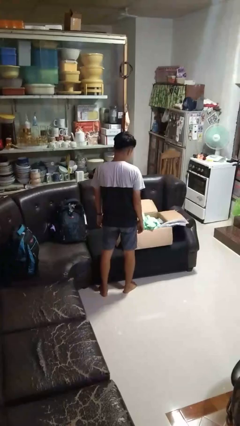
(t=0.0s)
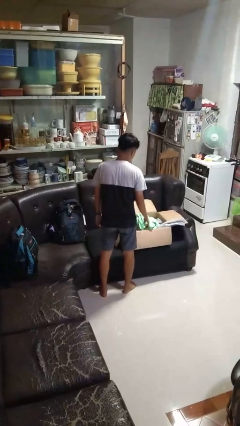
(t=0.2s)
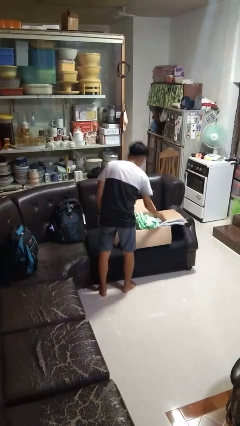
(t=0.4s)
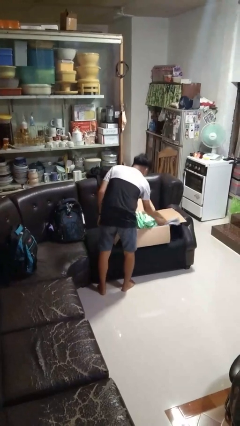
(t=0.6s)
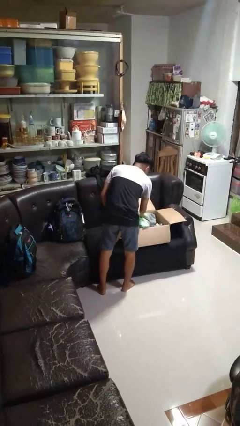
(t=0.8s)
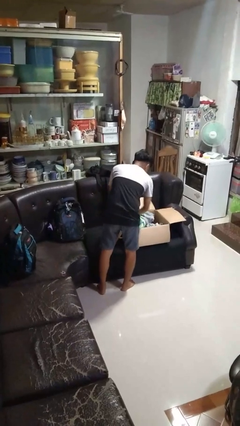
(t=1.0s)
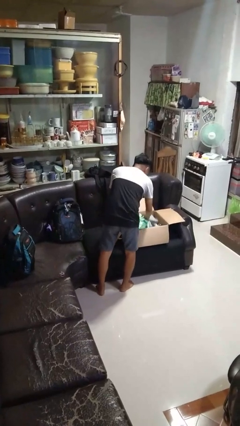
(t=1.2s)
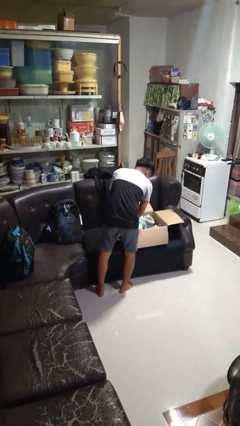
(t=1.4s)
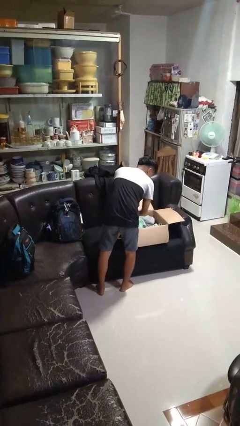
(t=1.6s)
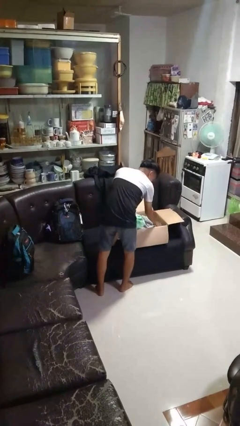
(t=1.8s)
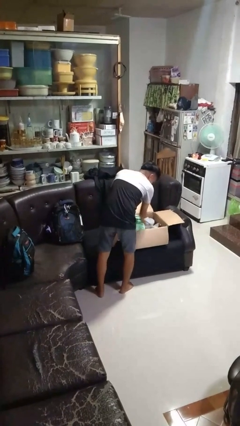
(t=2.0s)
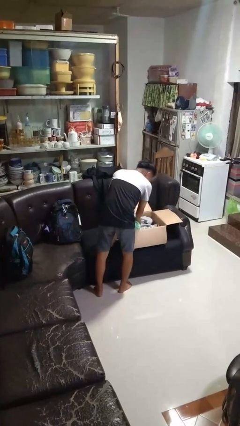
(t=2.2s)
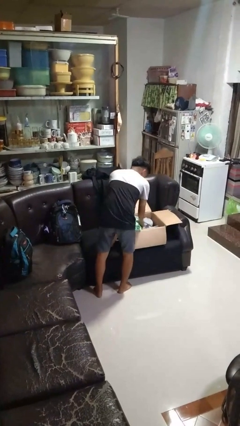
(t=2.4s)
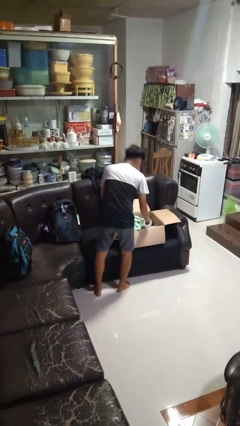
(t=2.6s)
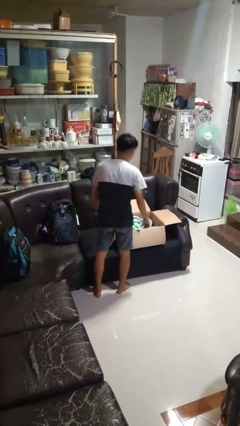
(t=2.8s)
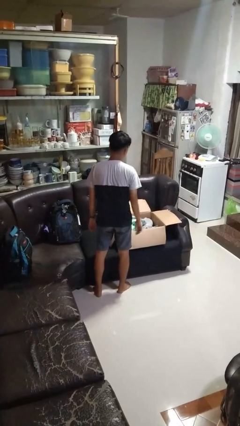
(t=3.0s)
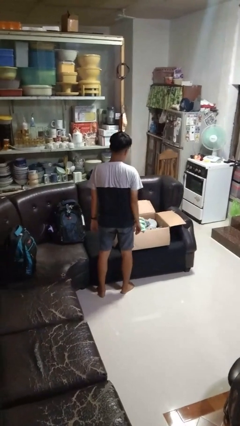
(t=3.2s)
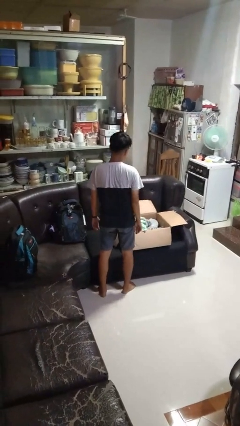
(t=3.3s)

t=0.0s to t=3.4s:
person searches in box

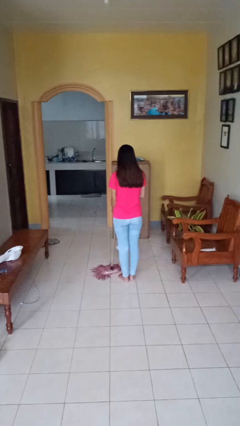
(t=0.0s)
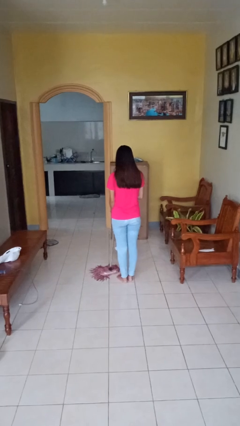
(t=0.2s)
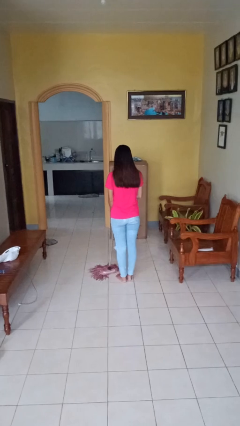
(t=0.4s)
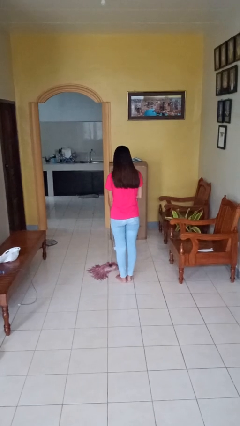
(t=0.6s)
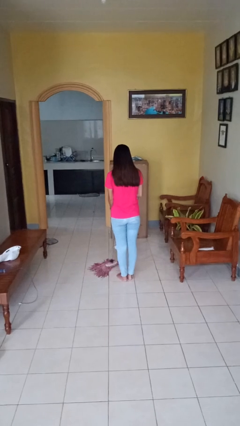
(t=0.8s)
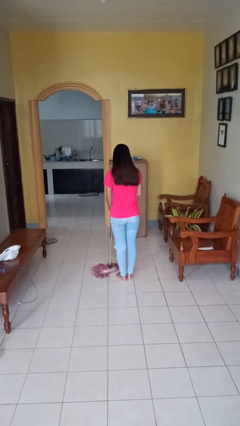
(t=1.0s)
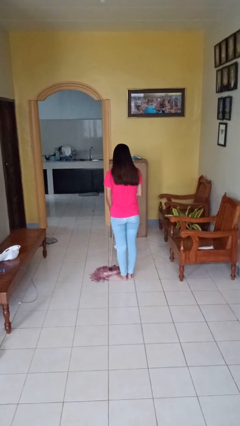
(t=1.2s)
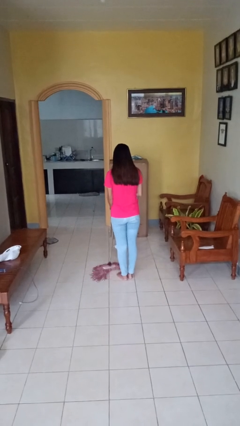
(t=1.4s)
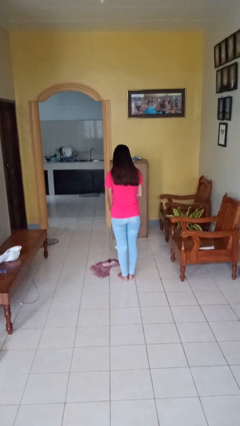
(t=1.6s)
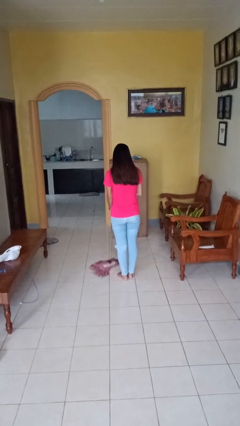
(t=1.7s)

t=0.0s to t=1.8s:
person mops

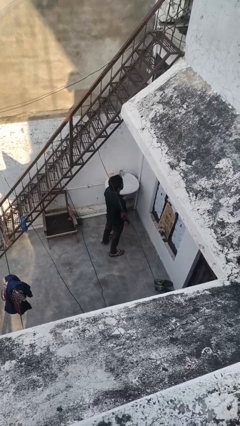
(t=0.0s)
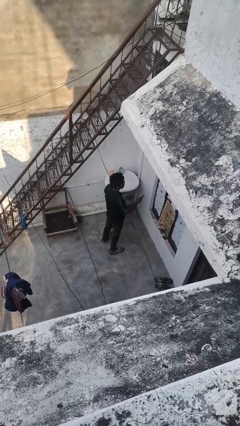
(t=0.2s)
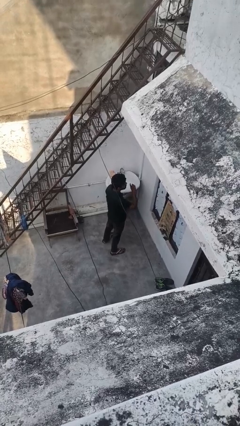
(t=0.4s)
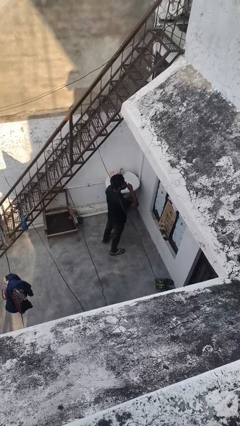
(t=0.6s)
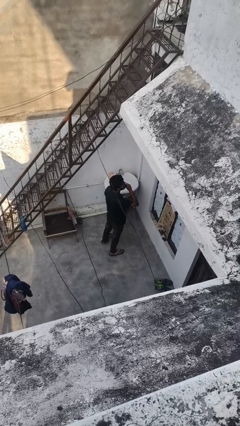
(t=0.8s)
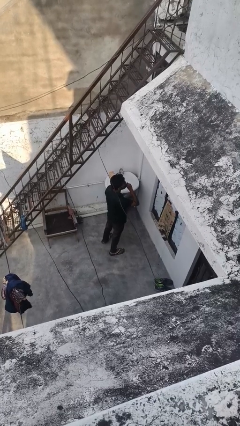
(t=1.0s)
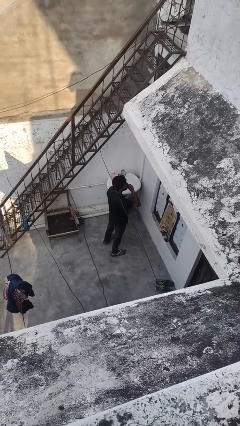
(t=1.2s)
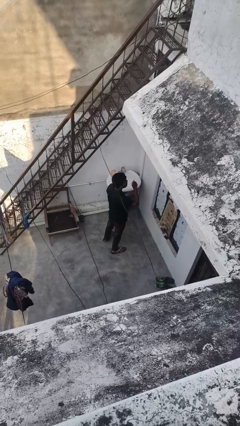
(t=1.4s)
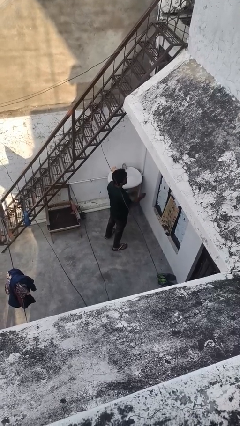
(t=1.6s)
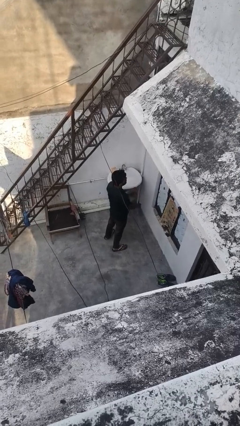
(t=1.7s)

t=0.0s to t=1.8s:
person gestures be quiet

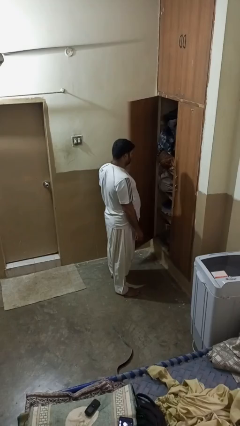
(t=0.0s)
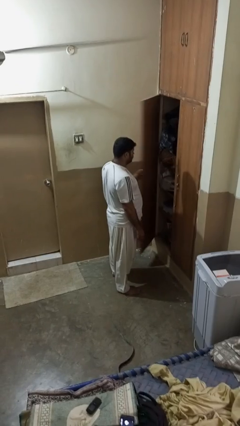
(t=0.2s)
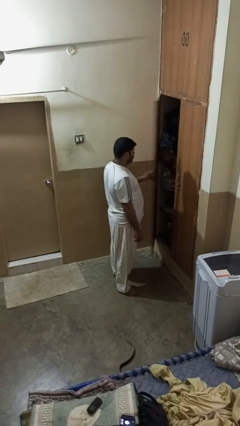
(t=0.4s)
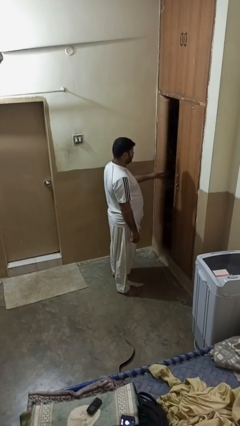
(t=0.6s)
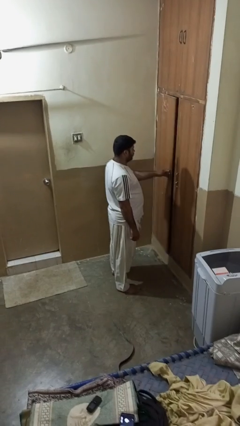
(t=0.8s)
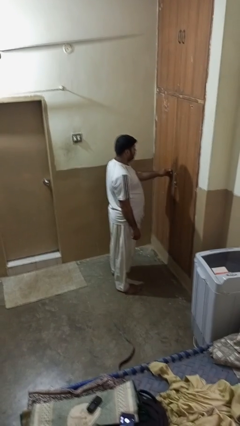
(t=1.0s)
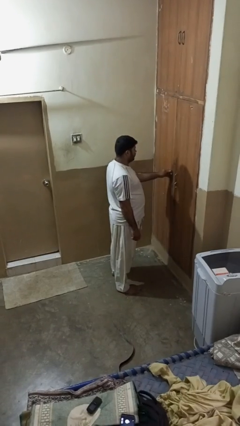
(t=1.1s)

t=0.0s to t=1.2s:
person closes closet door

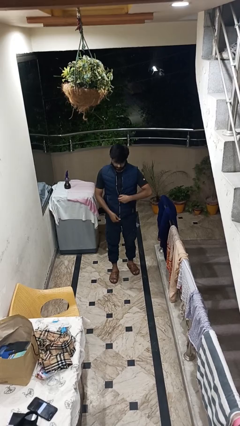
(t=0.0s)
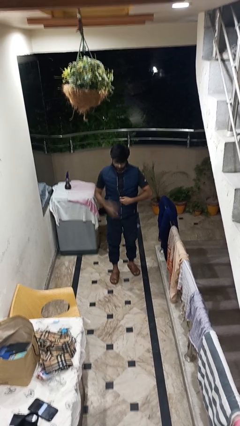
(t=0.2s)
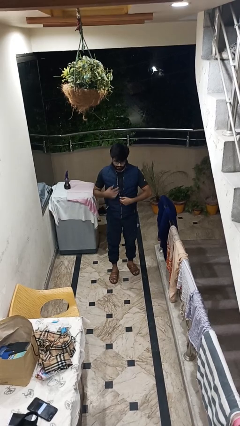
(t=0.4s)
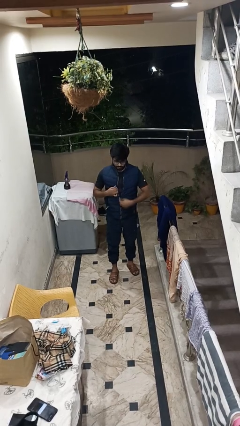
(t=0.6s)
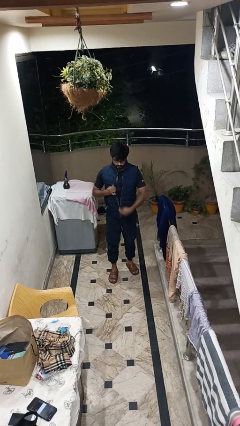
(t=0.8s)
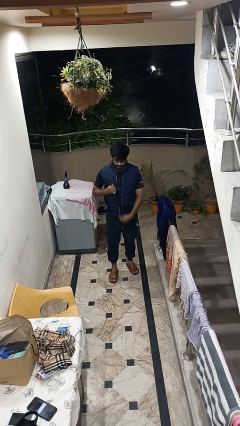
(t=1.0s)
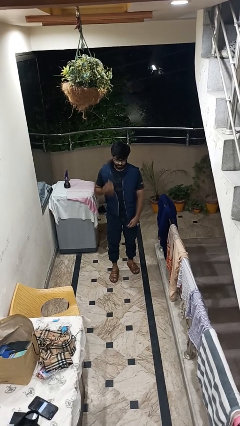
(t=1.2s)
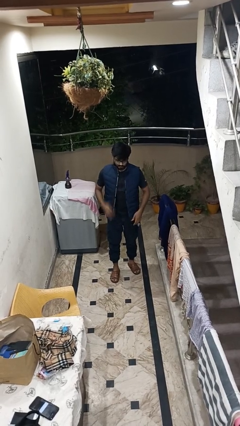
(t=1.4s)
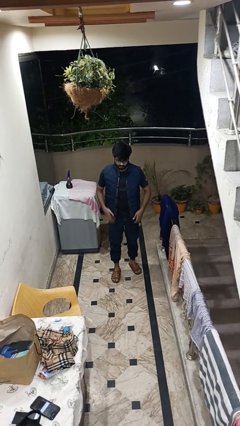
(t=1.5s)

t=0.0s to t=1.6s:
person unzips jacket

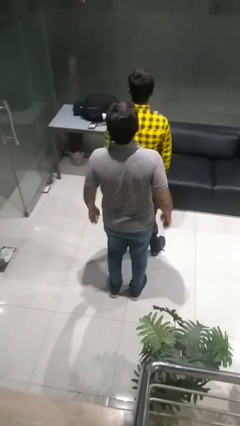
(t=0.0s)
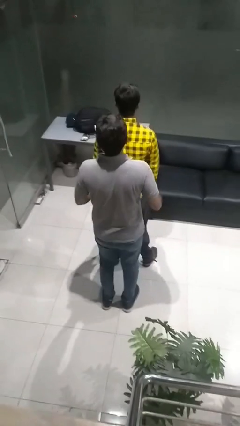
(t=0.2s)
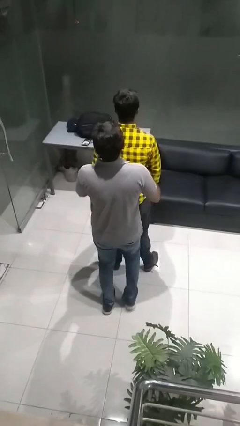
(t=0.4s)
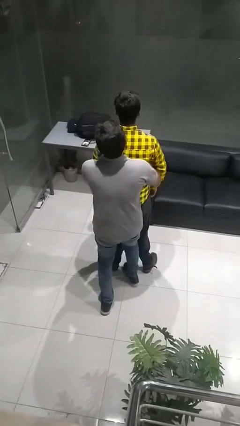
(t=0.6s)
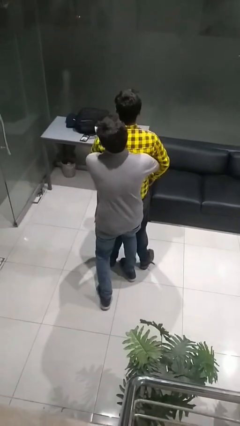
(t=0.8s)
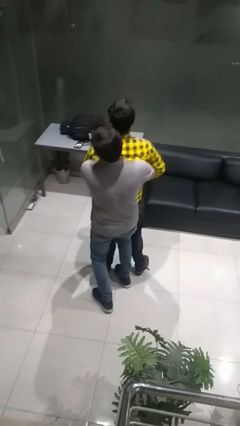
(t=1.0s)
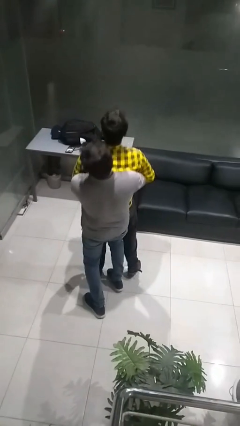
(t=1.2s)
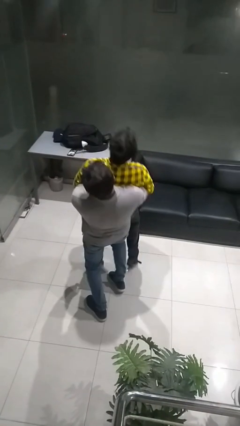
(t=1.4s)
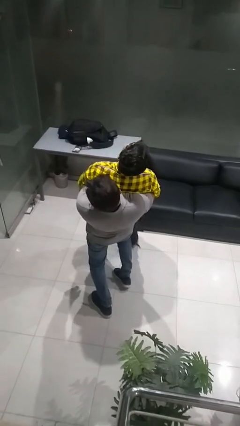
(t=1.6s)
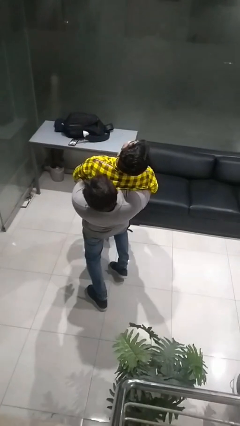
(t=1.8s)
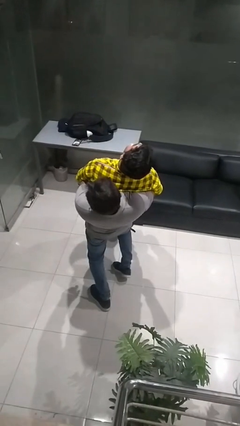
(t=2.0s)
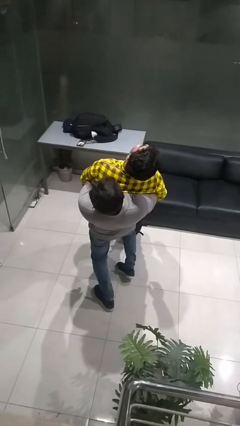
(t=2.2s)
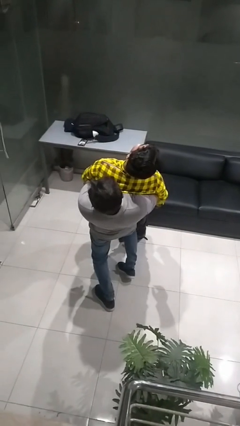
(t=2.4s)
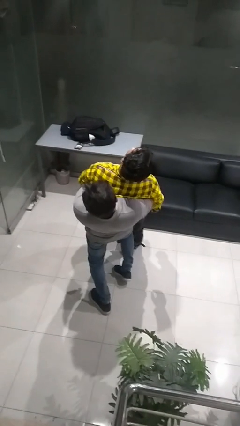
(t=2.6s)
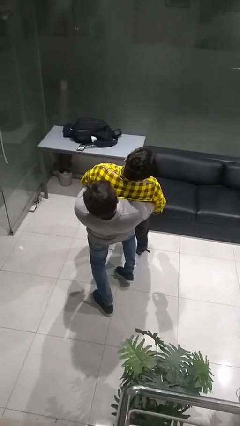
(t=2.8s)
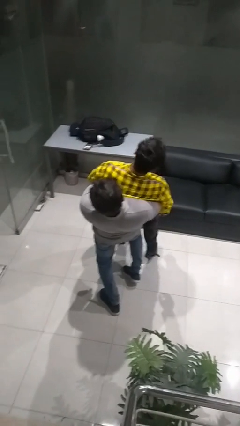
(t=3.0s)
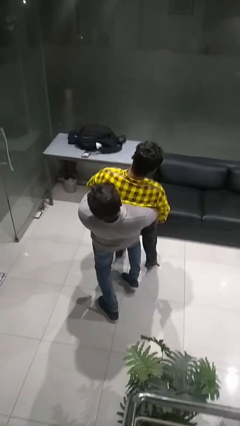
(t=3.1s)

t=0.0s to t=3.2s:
person picks up person

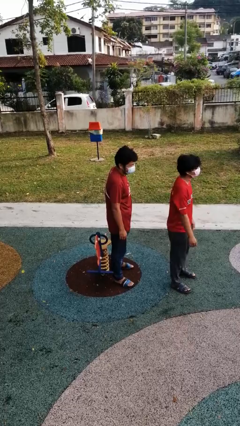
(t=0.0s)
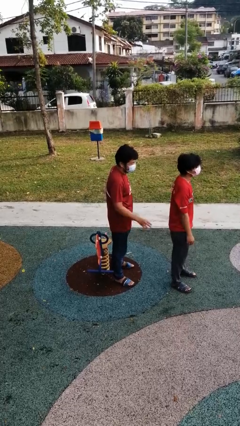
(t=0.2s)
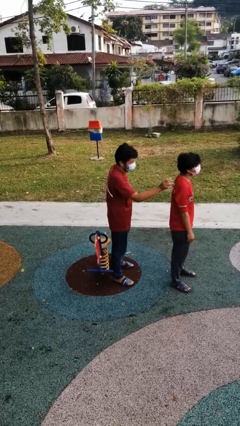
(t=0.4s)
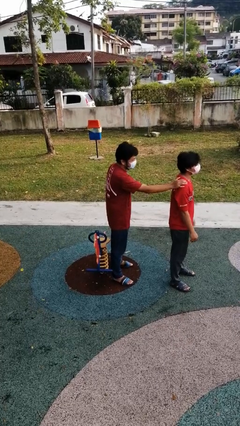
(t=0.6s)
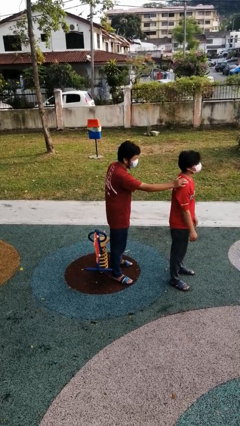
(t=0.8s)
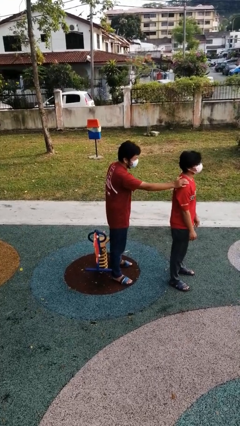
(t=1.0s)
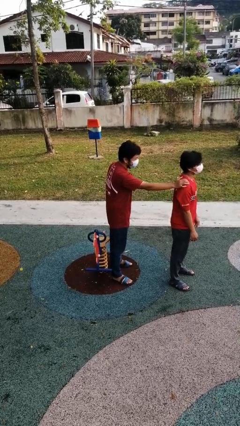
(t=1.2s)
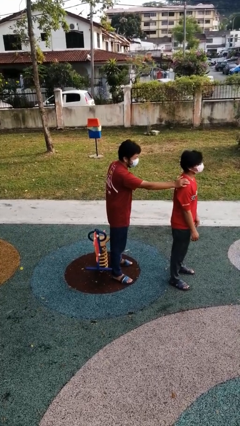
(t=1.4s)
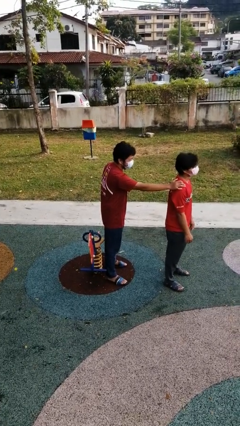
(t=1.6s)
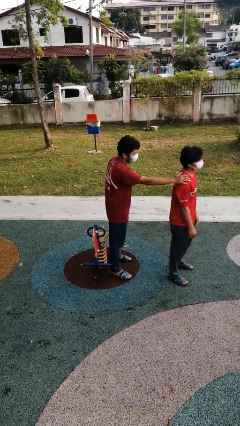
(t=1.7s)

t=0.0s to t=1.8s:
person grabs person by shoulder

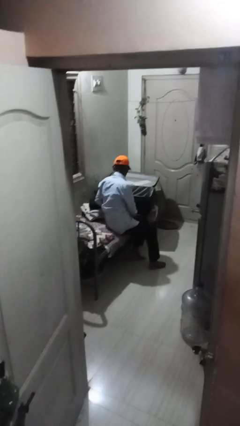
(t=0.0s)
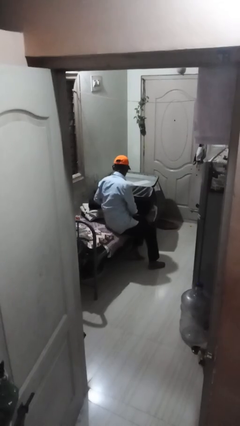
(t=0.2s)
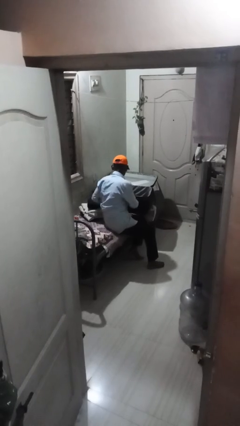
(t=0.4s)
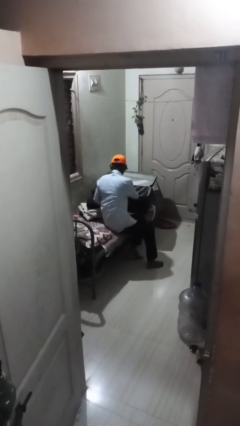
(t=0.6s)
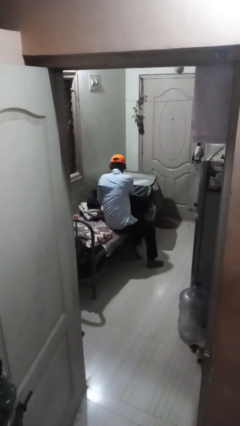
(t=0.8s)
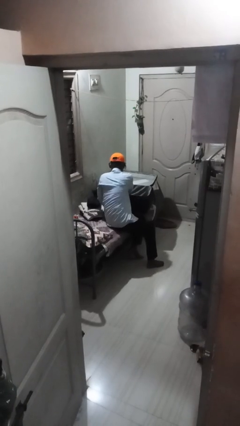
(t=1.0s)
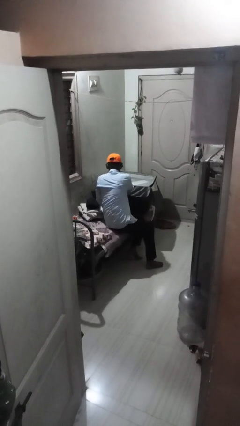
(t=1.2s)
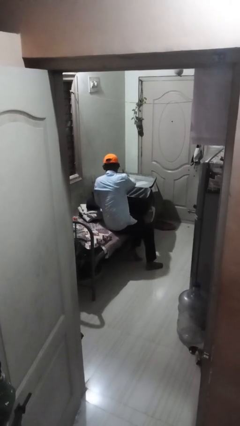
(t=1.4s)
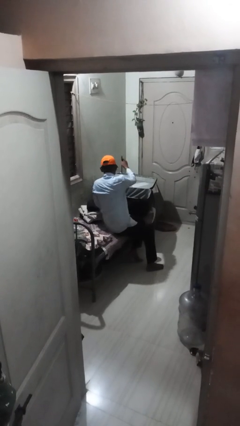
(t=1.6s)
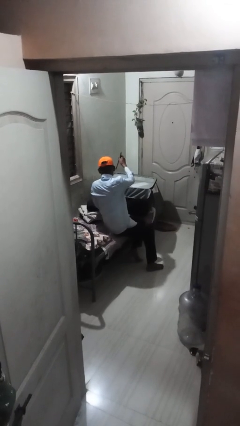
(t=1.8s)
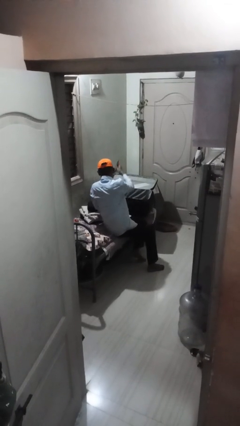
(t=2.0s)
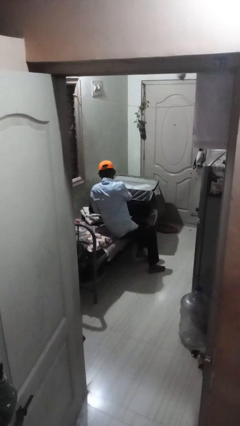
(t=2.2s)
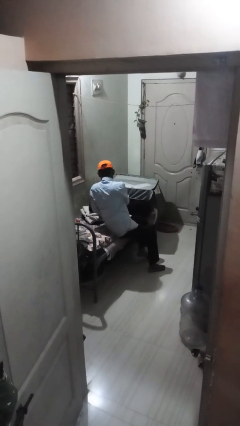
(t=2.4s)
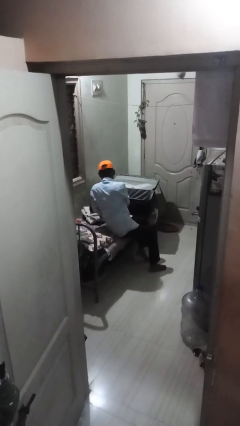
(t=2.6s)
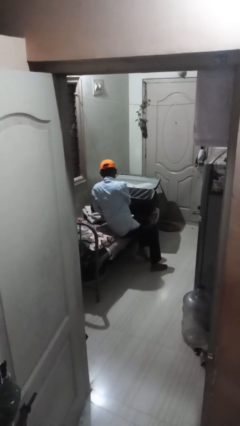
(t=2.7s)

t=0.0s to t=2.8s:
person unloads clothes from suitcase
